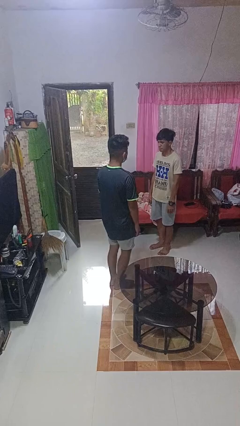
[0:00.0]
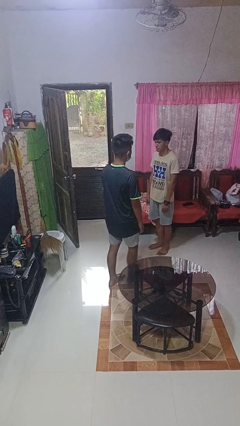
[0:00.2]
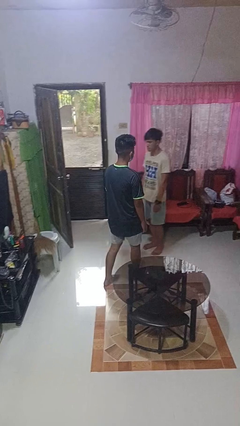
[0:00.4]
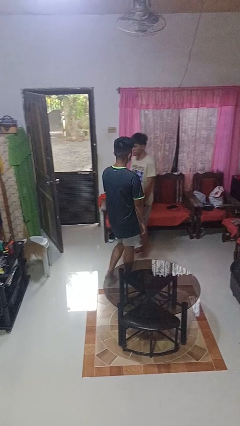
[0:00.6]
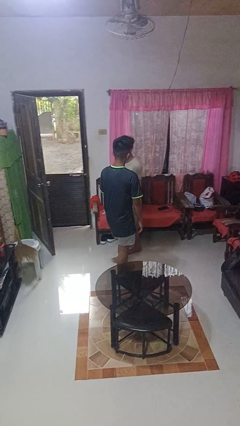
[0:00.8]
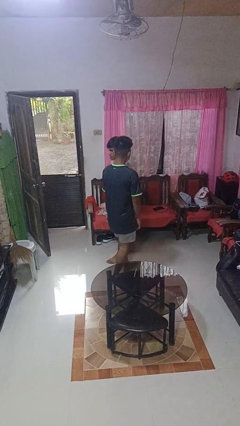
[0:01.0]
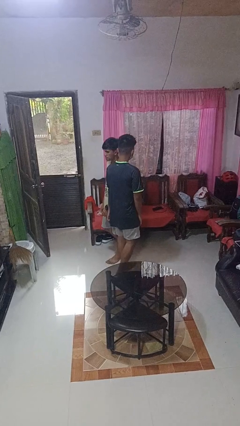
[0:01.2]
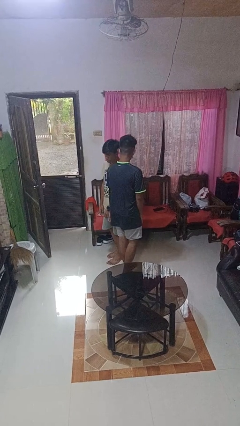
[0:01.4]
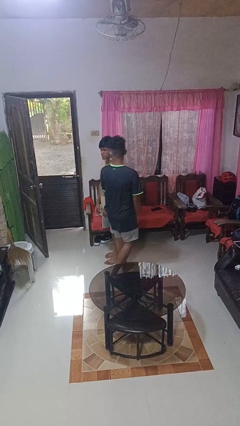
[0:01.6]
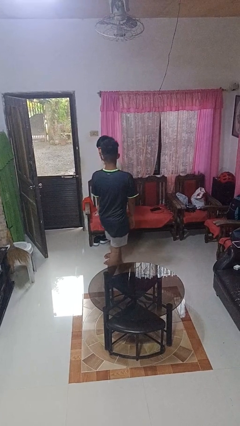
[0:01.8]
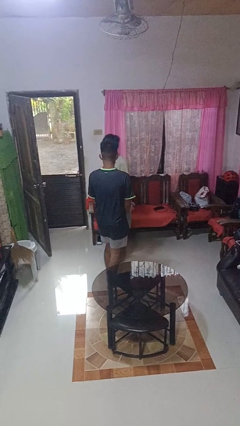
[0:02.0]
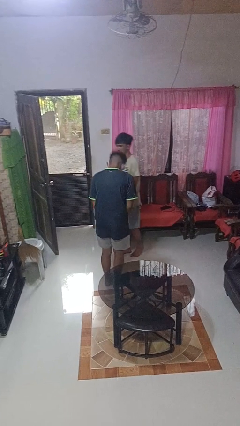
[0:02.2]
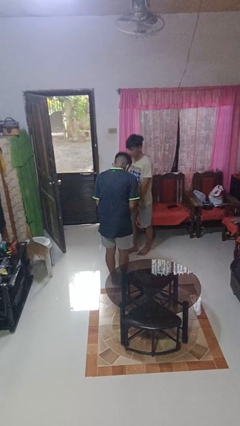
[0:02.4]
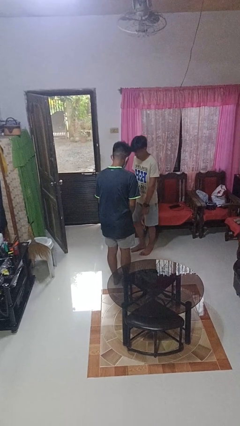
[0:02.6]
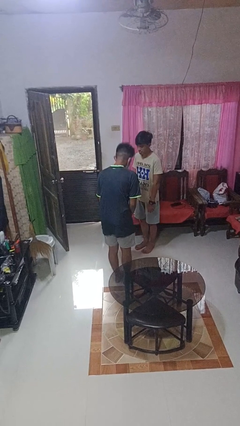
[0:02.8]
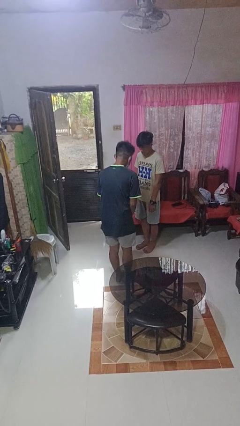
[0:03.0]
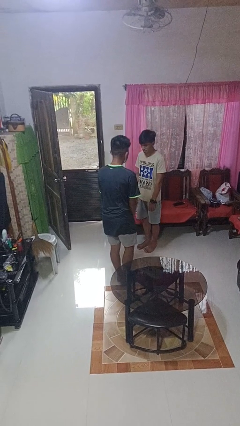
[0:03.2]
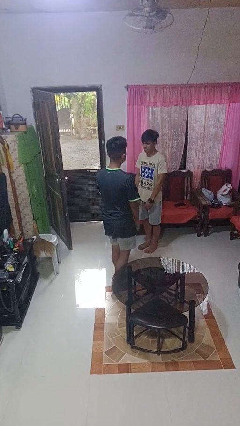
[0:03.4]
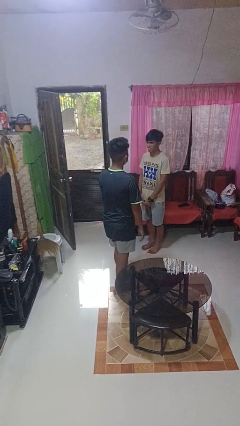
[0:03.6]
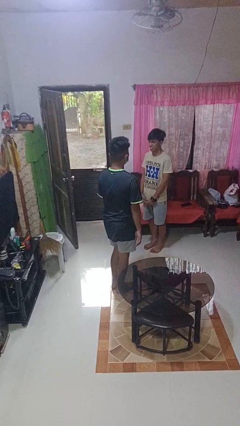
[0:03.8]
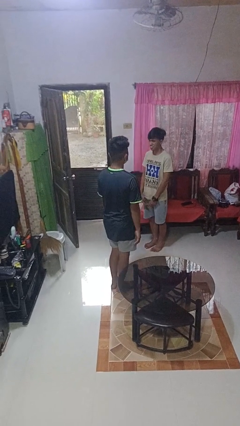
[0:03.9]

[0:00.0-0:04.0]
person bumps into person

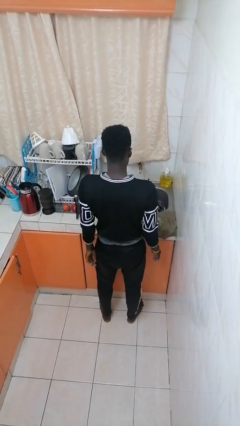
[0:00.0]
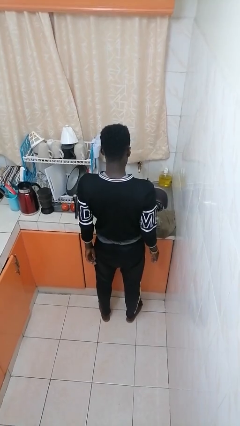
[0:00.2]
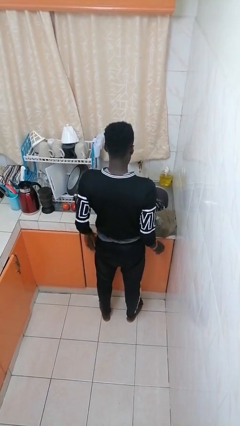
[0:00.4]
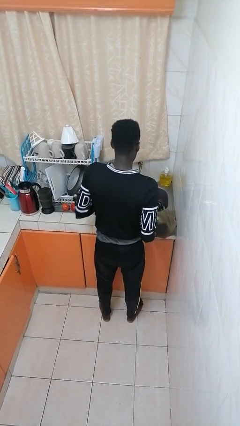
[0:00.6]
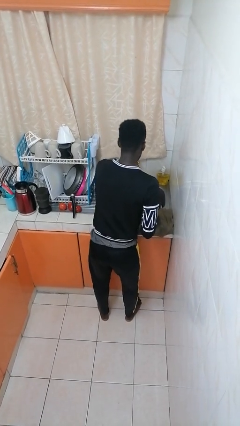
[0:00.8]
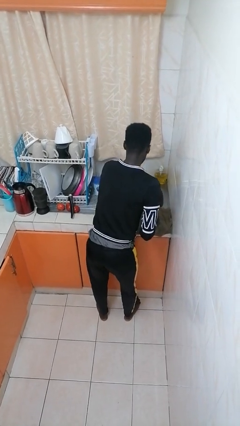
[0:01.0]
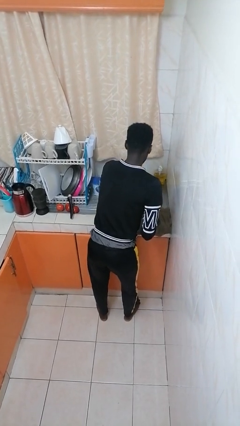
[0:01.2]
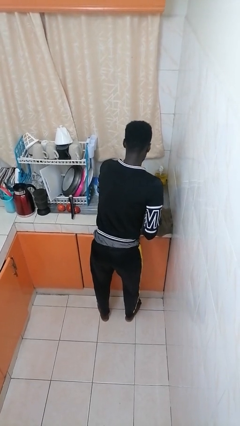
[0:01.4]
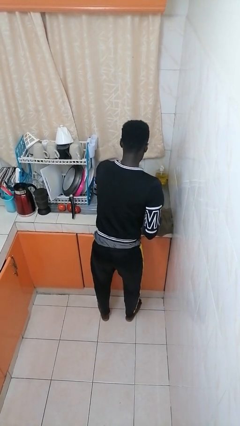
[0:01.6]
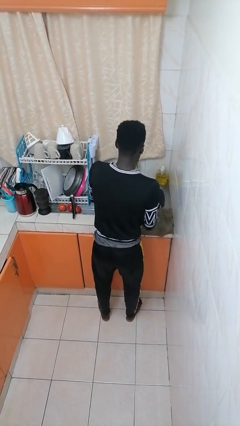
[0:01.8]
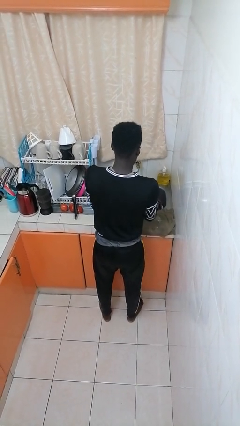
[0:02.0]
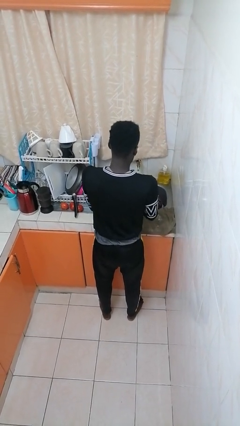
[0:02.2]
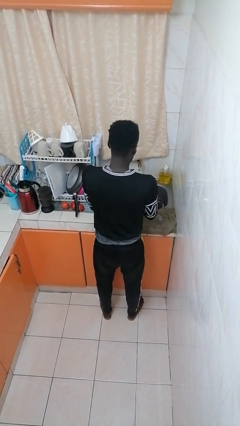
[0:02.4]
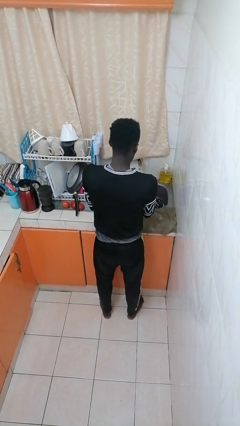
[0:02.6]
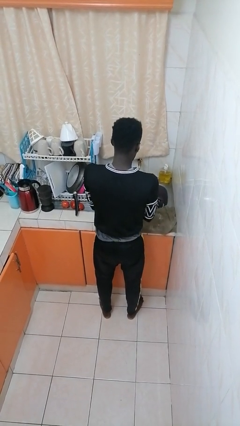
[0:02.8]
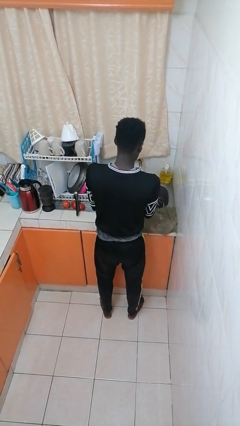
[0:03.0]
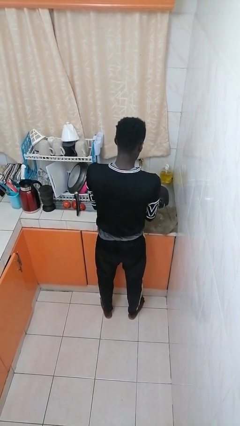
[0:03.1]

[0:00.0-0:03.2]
person washes dish

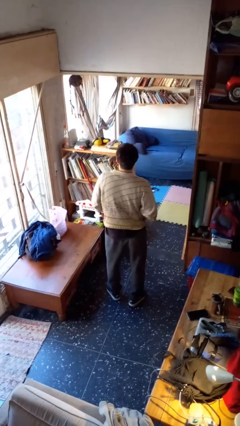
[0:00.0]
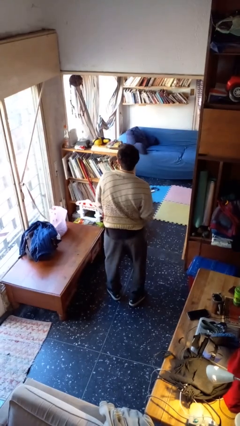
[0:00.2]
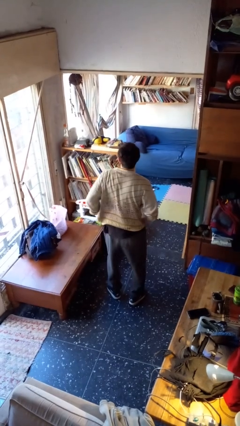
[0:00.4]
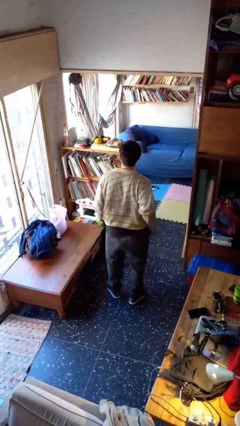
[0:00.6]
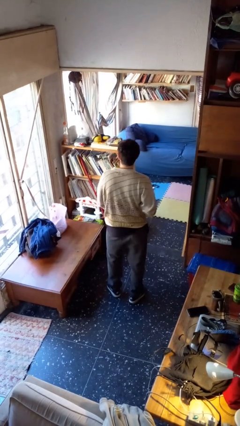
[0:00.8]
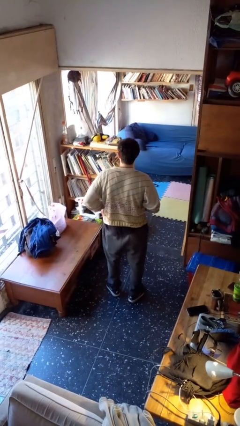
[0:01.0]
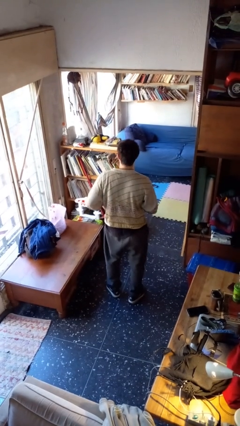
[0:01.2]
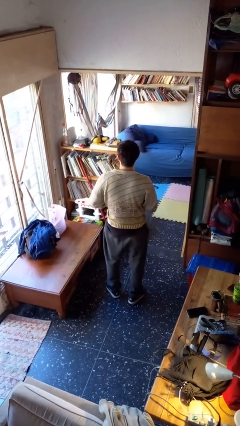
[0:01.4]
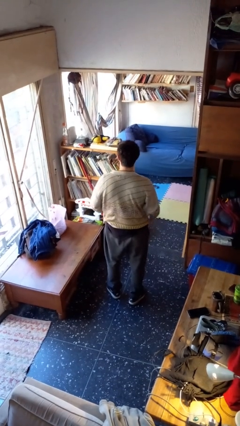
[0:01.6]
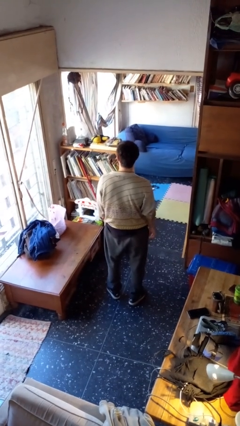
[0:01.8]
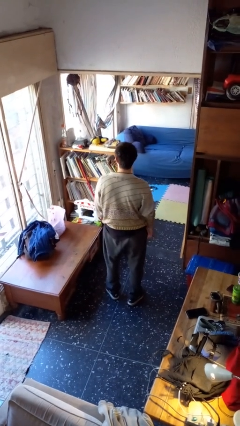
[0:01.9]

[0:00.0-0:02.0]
person hikes up pants

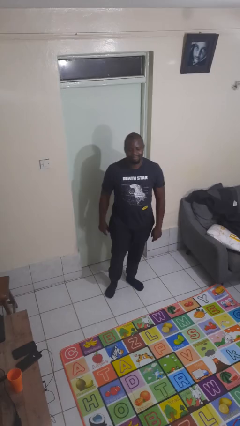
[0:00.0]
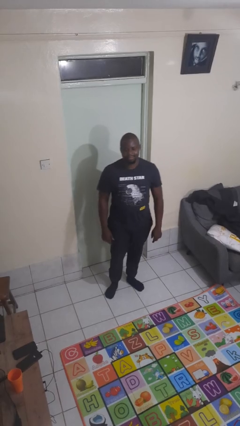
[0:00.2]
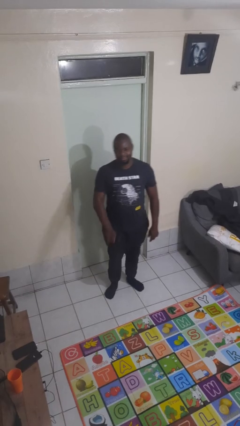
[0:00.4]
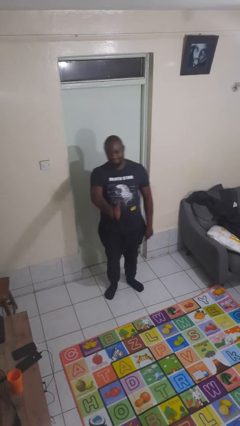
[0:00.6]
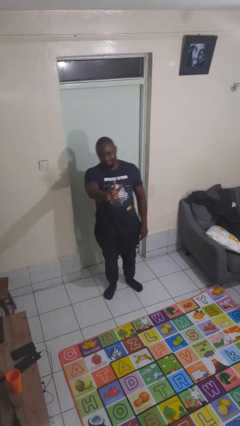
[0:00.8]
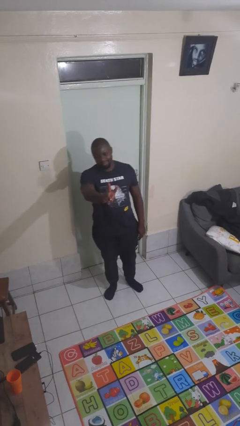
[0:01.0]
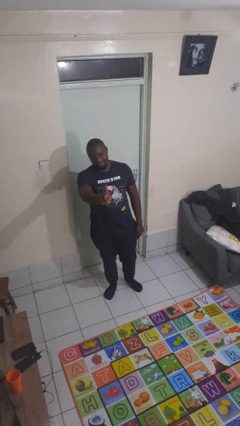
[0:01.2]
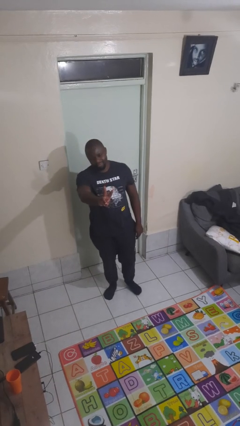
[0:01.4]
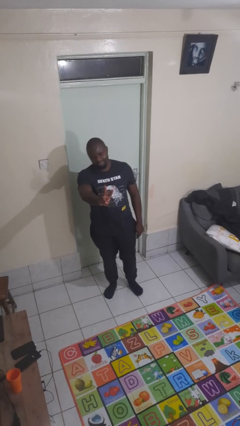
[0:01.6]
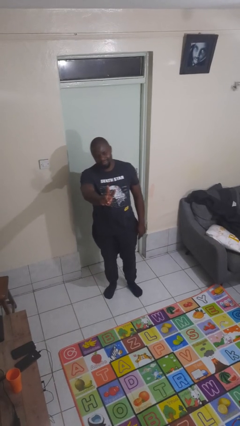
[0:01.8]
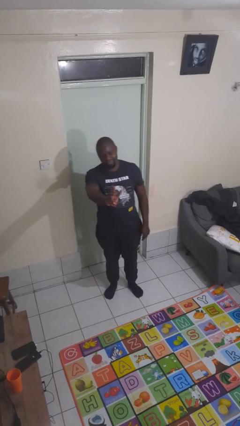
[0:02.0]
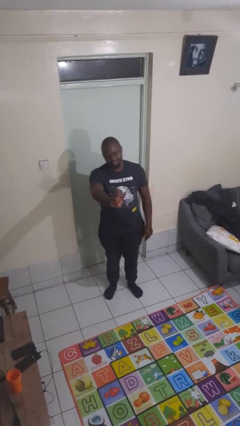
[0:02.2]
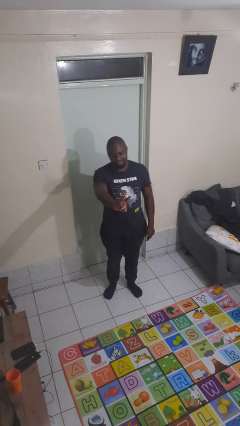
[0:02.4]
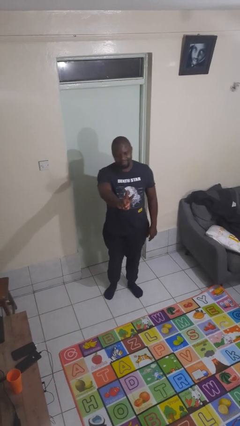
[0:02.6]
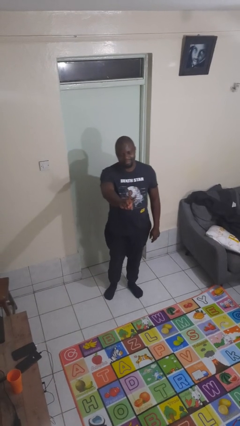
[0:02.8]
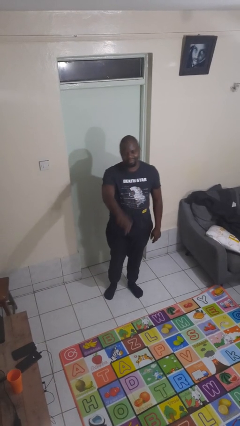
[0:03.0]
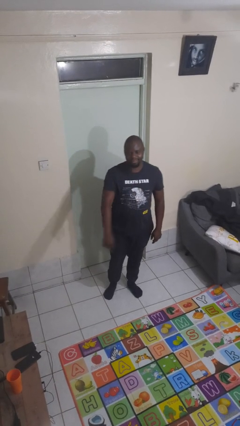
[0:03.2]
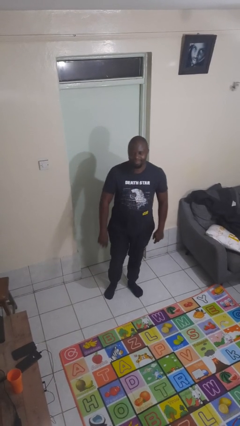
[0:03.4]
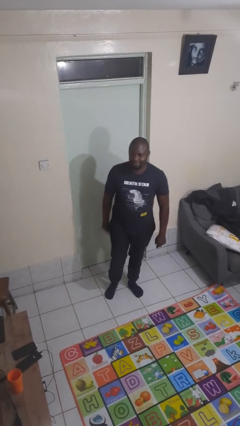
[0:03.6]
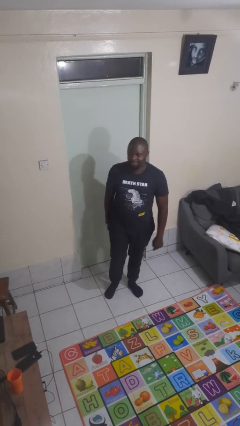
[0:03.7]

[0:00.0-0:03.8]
person gestures peace

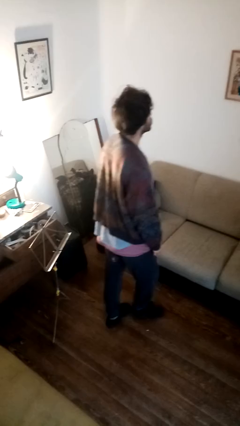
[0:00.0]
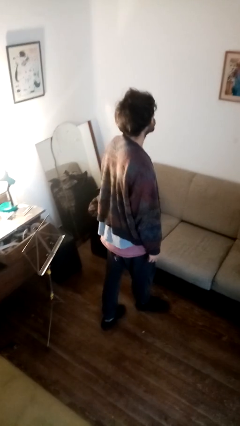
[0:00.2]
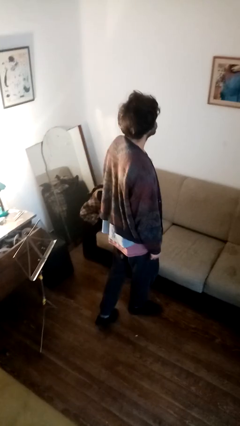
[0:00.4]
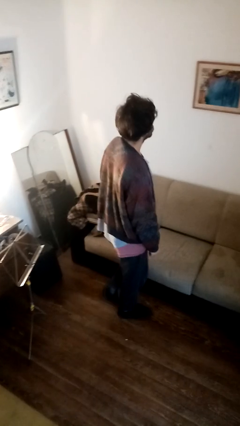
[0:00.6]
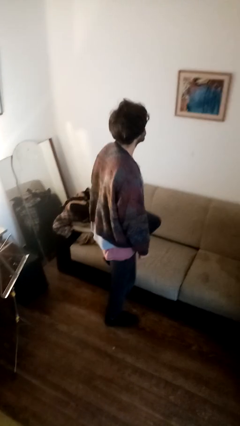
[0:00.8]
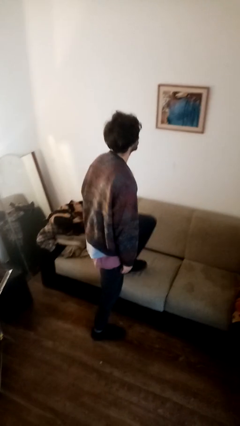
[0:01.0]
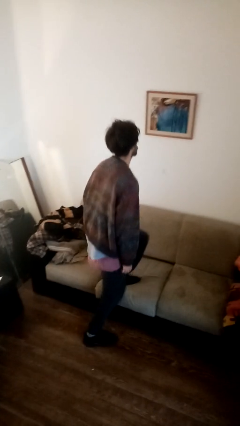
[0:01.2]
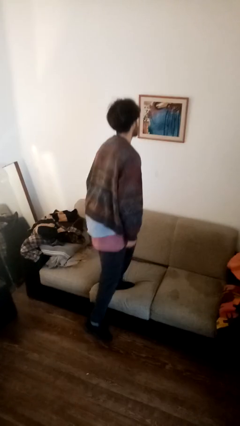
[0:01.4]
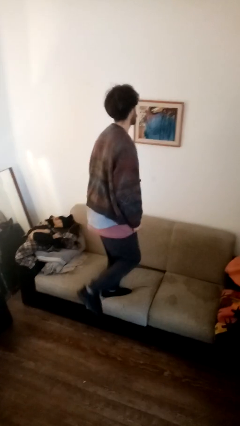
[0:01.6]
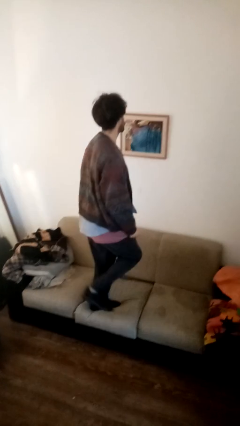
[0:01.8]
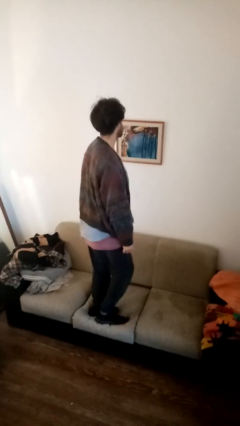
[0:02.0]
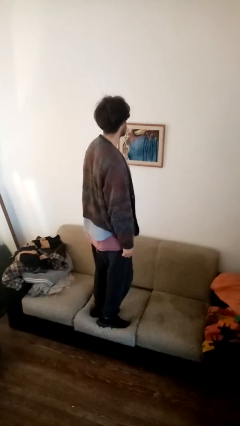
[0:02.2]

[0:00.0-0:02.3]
person climbs on couch

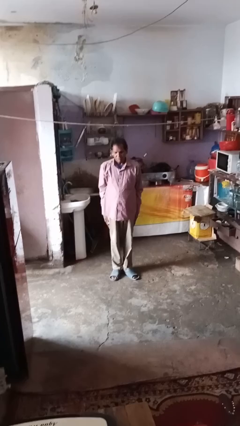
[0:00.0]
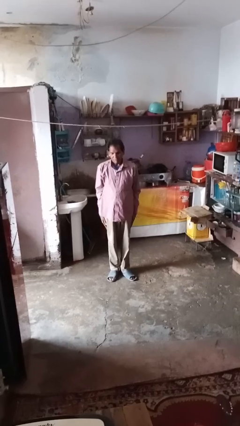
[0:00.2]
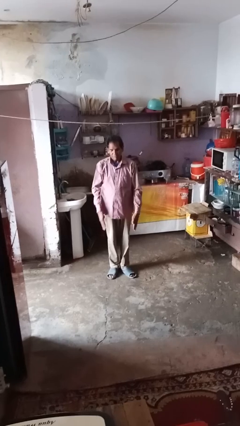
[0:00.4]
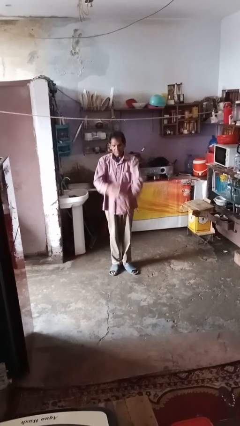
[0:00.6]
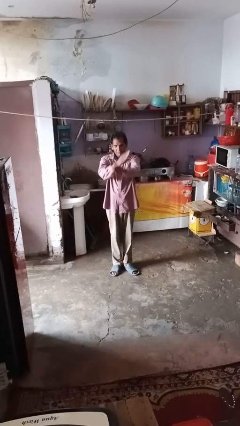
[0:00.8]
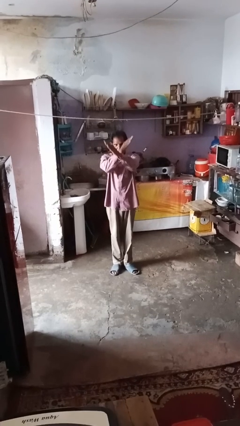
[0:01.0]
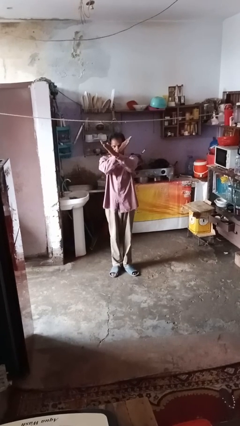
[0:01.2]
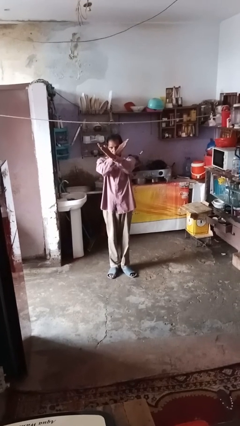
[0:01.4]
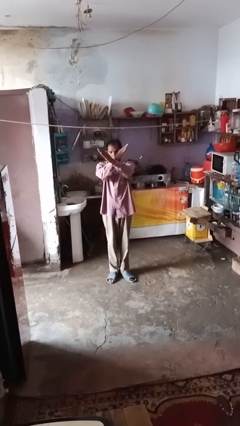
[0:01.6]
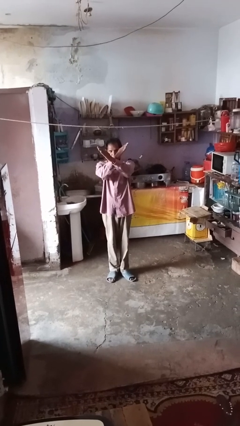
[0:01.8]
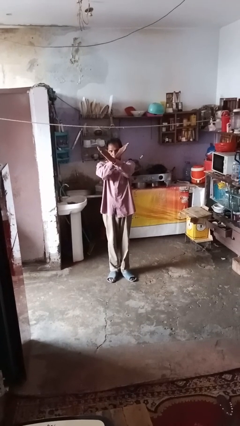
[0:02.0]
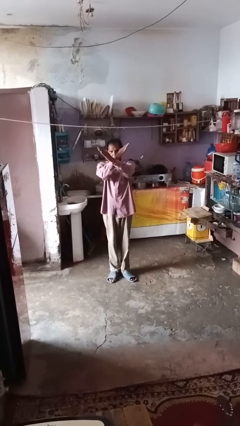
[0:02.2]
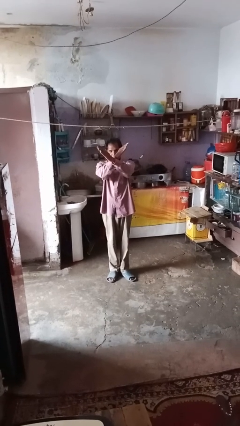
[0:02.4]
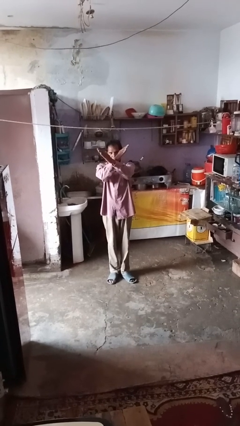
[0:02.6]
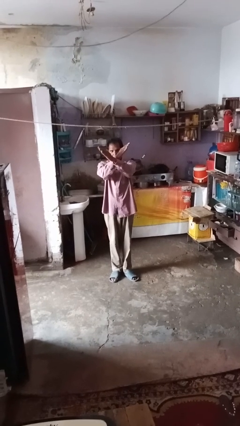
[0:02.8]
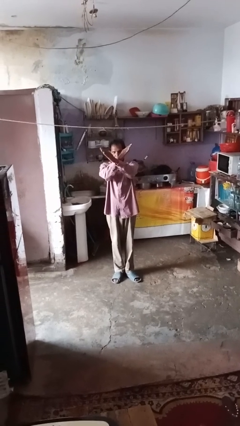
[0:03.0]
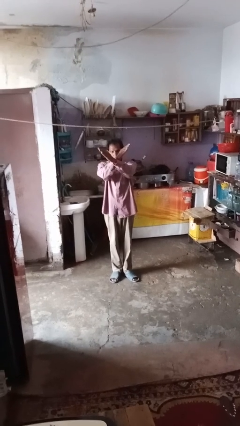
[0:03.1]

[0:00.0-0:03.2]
person gestures arms x
